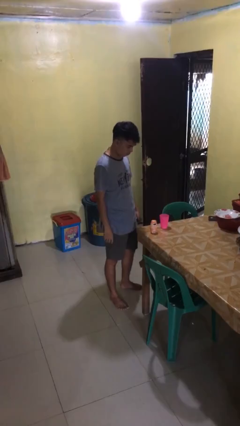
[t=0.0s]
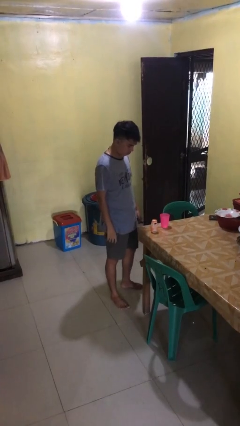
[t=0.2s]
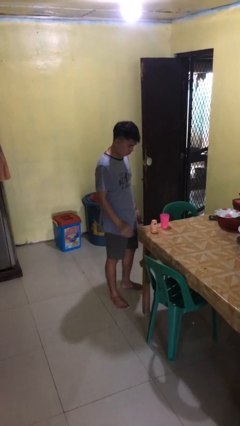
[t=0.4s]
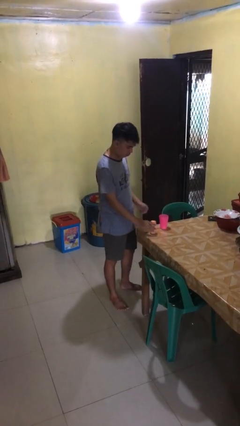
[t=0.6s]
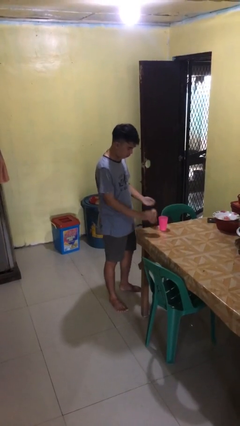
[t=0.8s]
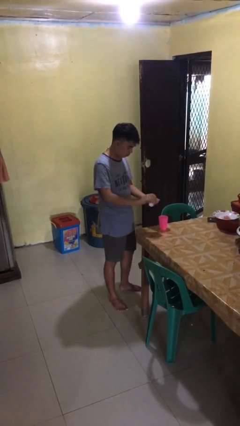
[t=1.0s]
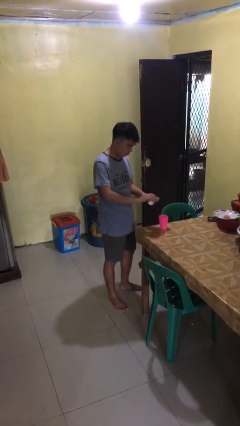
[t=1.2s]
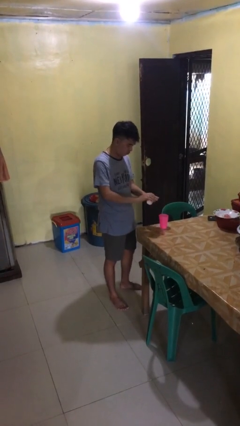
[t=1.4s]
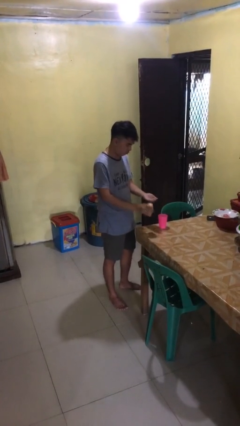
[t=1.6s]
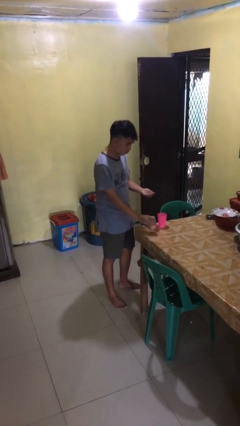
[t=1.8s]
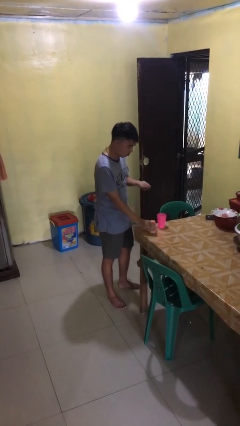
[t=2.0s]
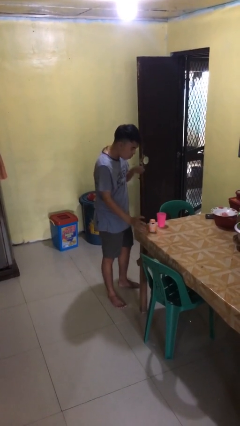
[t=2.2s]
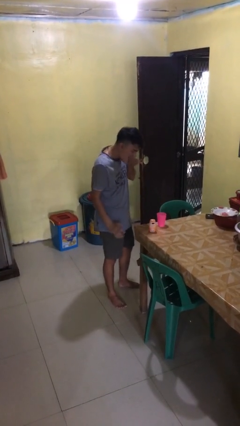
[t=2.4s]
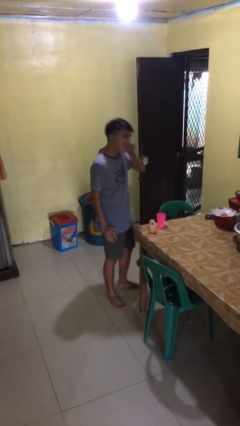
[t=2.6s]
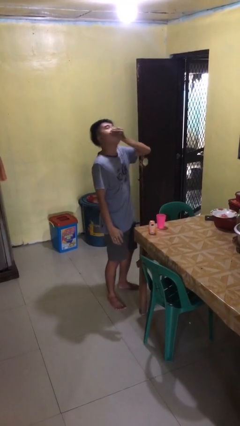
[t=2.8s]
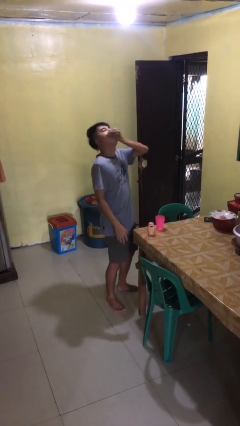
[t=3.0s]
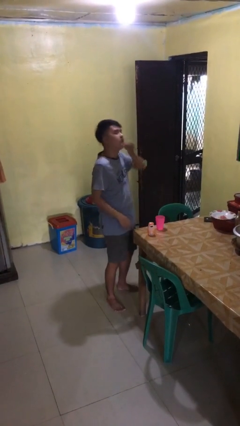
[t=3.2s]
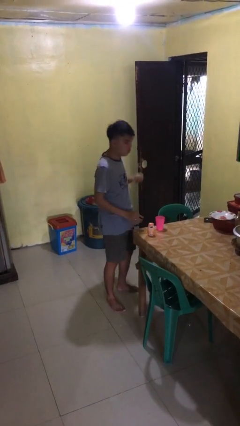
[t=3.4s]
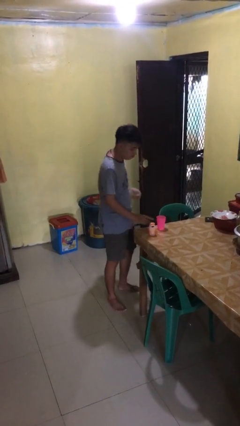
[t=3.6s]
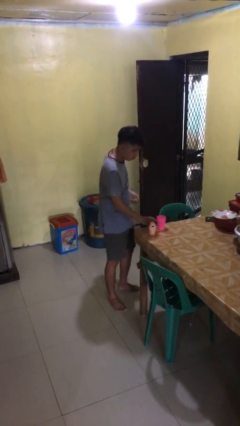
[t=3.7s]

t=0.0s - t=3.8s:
person takes medicine pills

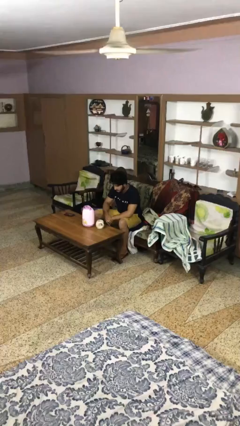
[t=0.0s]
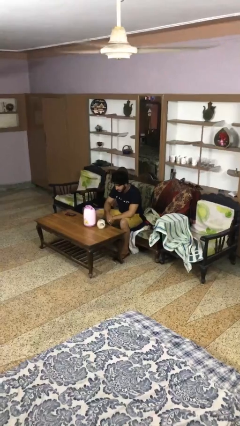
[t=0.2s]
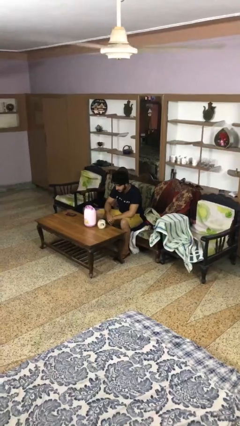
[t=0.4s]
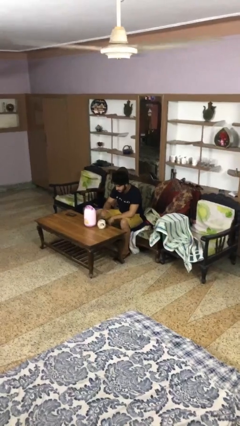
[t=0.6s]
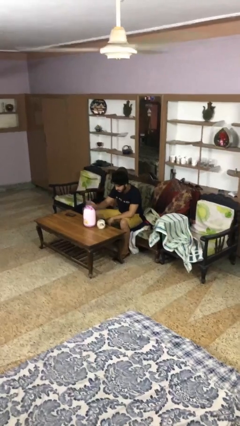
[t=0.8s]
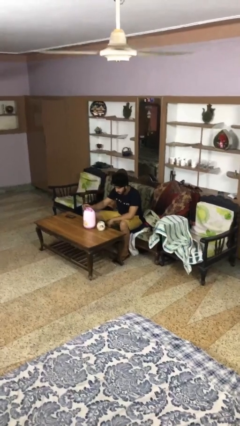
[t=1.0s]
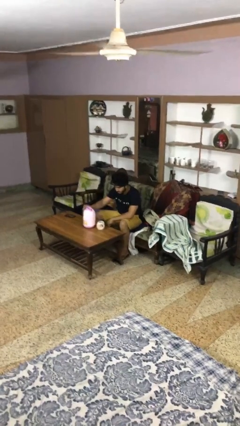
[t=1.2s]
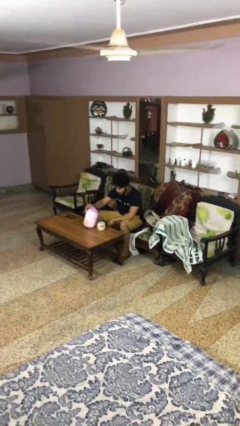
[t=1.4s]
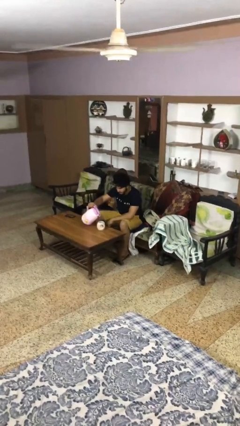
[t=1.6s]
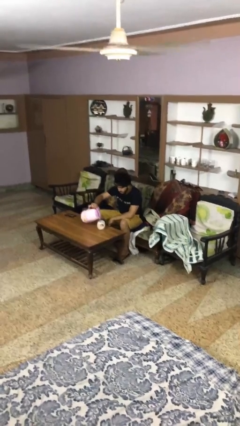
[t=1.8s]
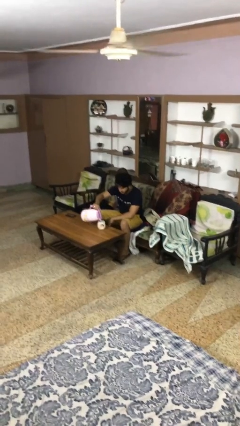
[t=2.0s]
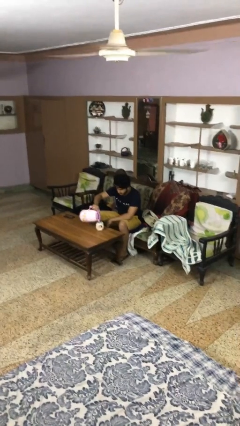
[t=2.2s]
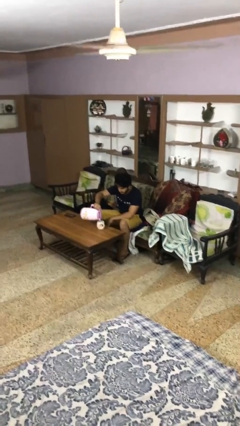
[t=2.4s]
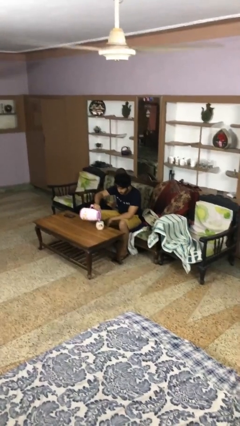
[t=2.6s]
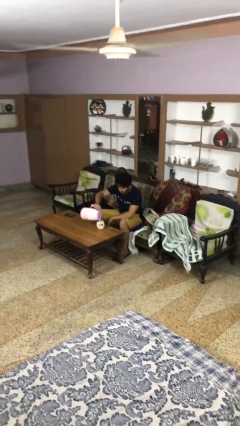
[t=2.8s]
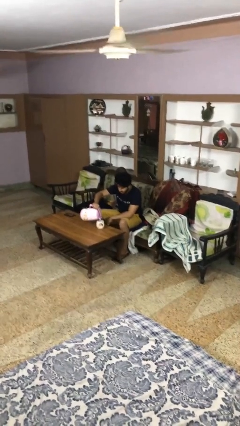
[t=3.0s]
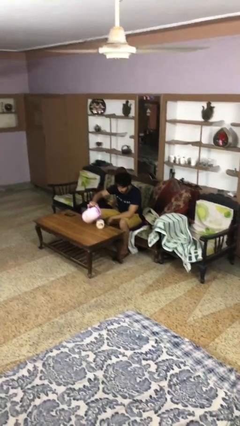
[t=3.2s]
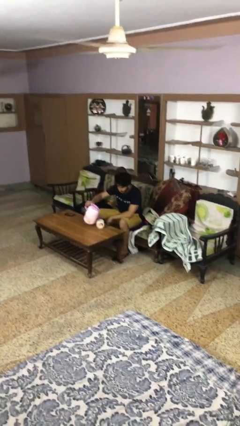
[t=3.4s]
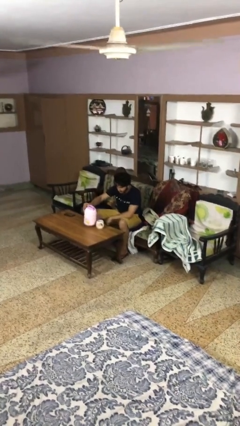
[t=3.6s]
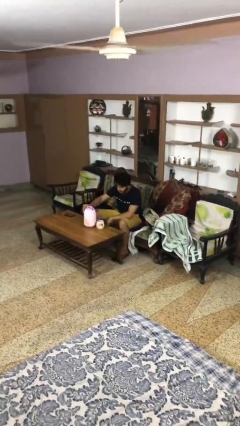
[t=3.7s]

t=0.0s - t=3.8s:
person pours coffee into mug

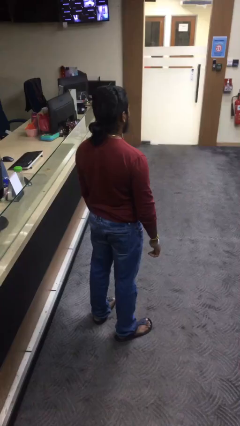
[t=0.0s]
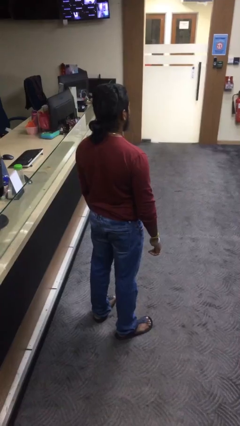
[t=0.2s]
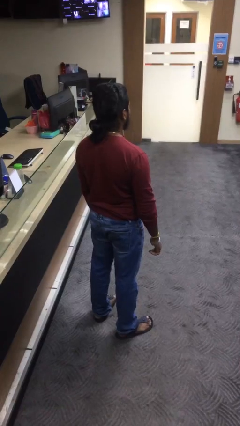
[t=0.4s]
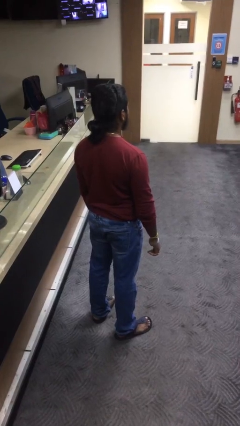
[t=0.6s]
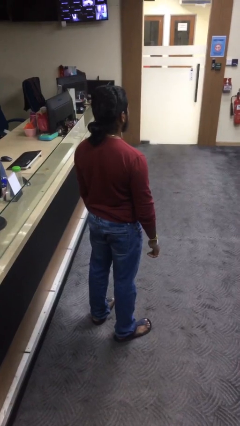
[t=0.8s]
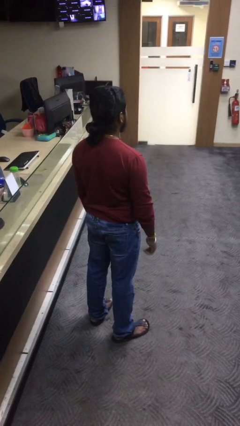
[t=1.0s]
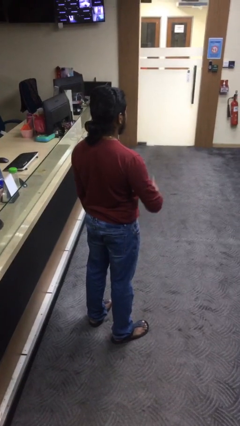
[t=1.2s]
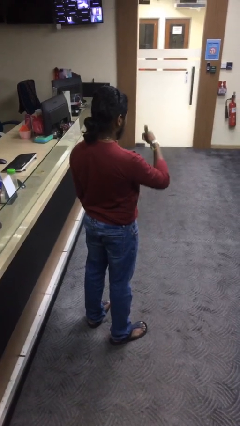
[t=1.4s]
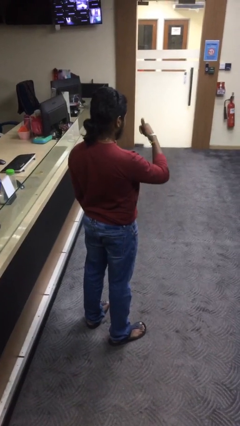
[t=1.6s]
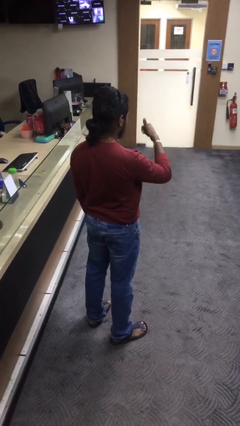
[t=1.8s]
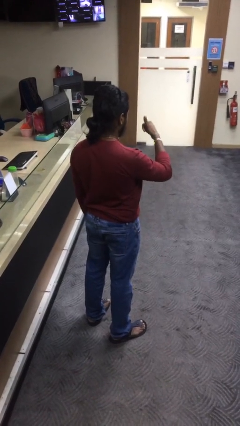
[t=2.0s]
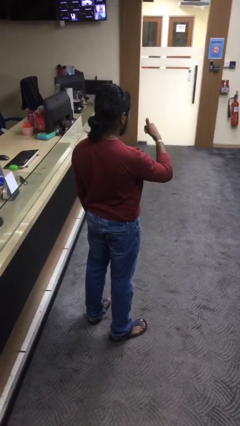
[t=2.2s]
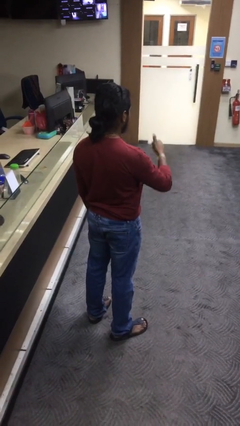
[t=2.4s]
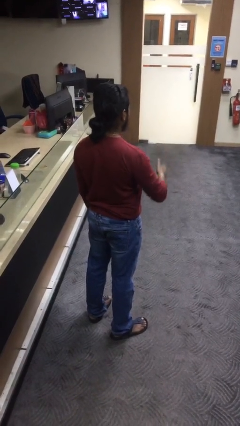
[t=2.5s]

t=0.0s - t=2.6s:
person gestures thumbs up

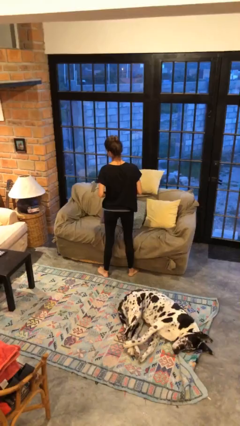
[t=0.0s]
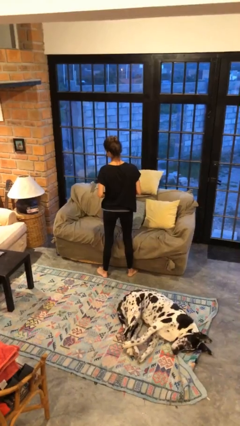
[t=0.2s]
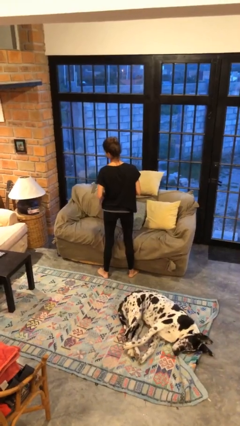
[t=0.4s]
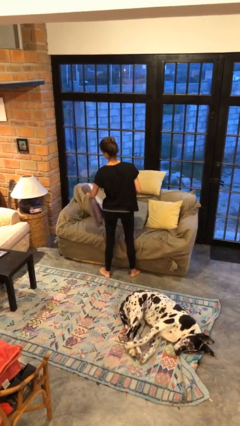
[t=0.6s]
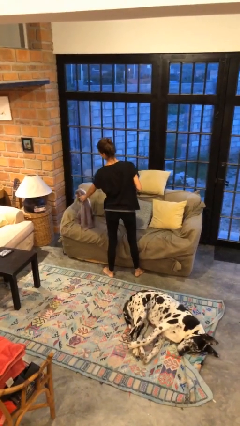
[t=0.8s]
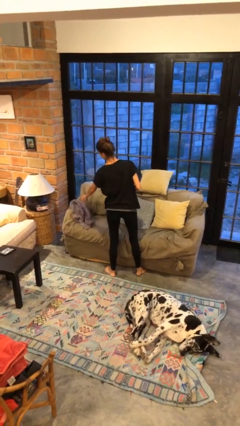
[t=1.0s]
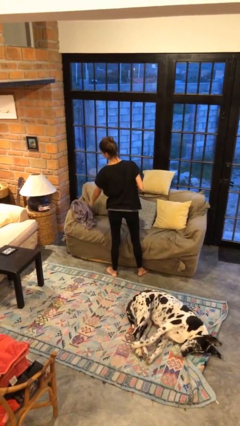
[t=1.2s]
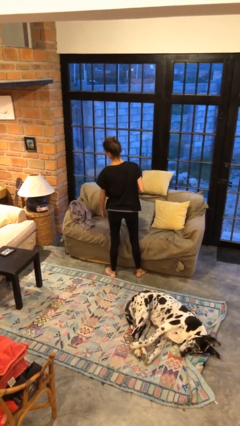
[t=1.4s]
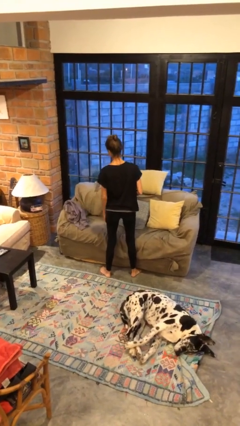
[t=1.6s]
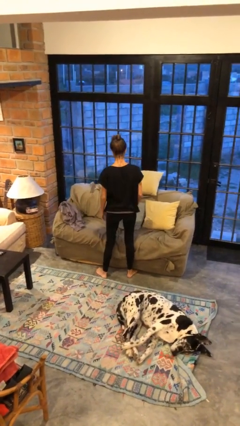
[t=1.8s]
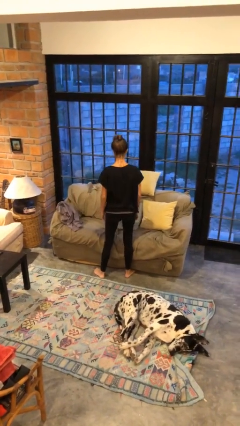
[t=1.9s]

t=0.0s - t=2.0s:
person puts down object on couch

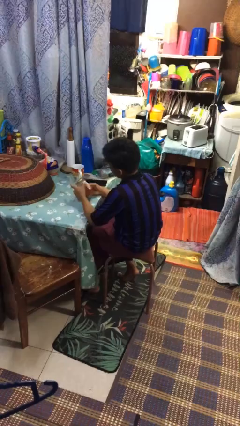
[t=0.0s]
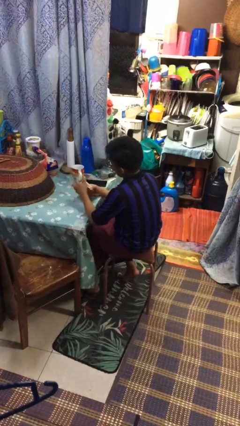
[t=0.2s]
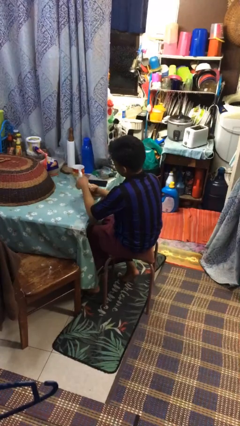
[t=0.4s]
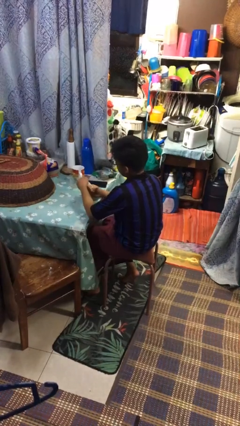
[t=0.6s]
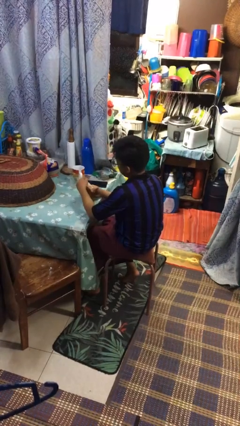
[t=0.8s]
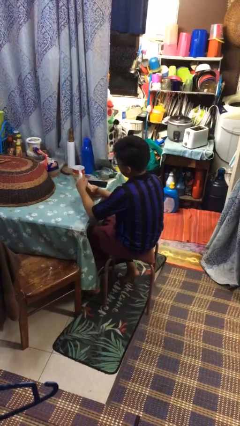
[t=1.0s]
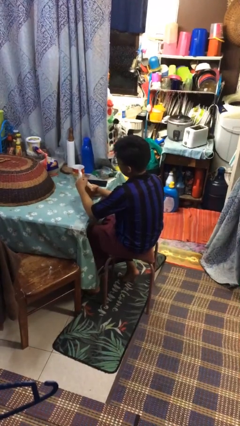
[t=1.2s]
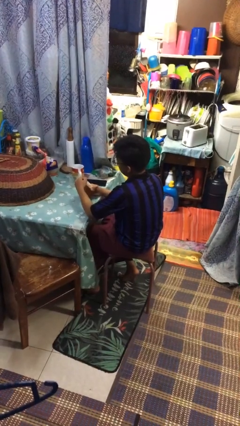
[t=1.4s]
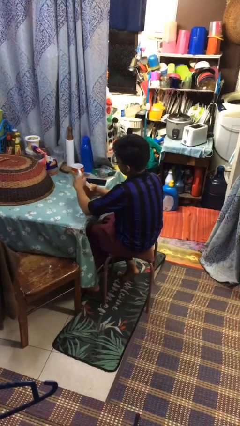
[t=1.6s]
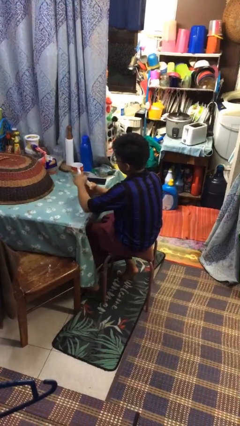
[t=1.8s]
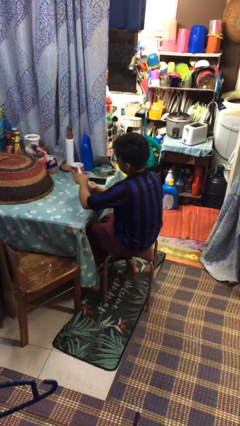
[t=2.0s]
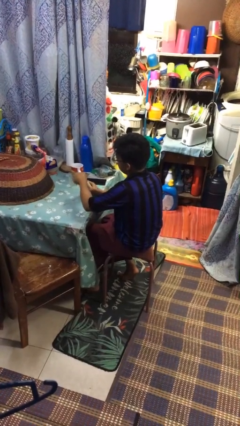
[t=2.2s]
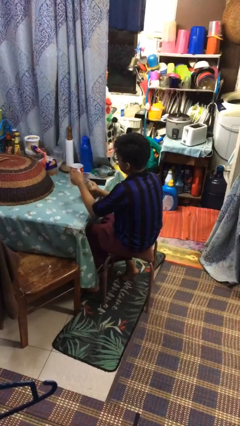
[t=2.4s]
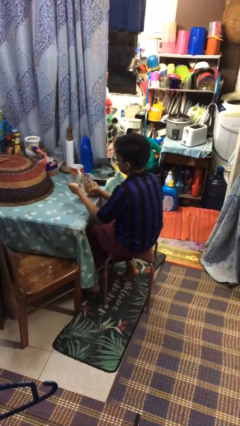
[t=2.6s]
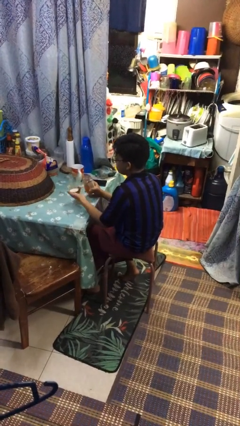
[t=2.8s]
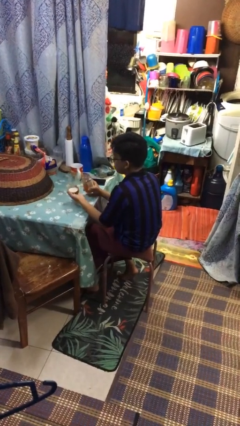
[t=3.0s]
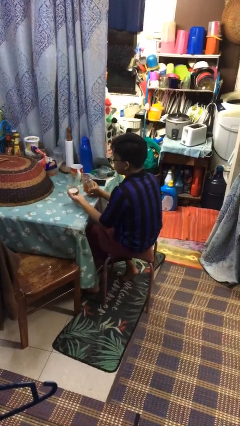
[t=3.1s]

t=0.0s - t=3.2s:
person opens jar

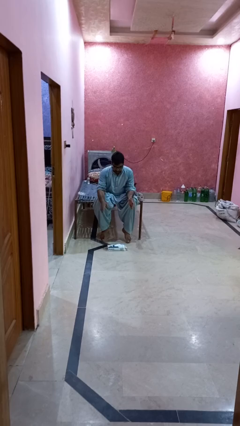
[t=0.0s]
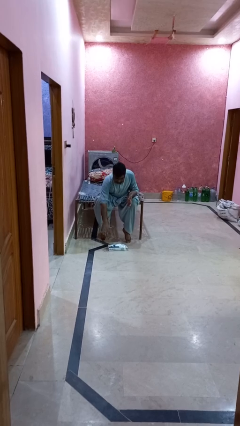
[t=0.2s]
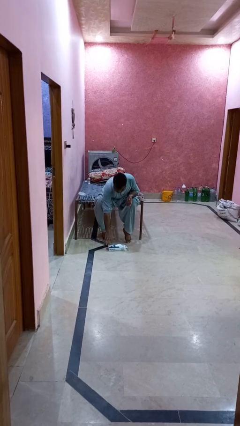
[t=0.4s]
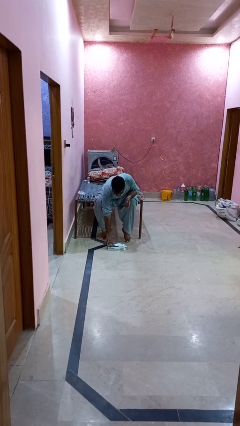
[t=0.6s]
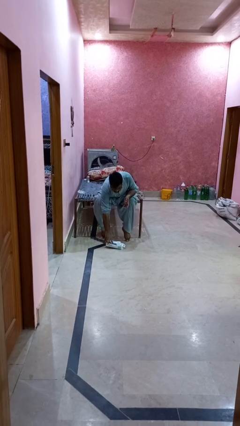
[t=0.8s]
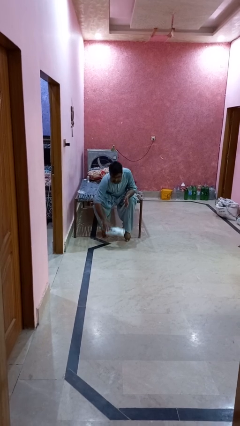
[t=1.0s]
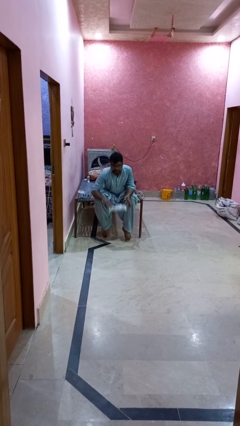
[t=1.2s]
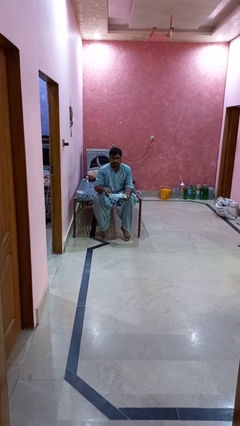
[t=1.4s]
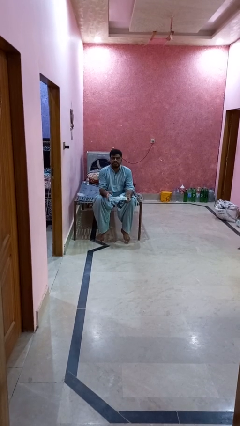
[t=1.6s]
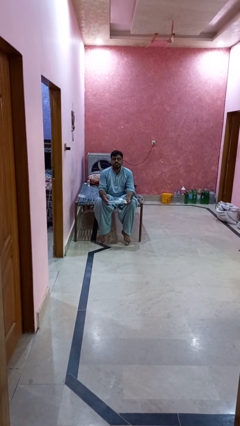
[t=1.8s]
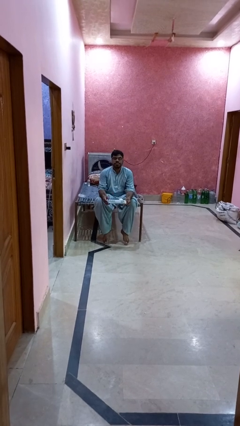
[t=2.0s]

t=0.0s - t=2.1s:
person picks up object from floor
